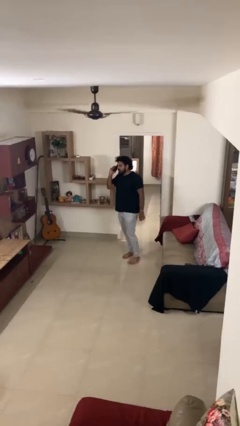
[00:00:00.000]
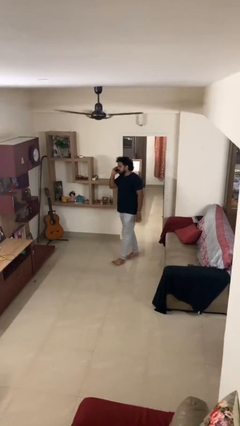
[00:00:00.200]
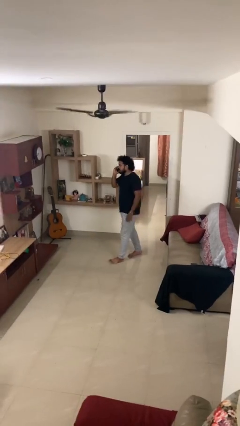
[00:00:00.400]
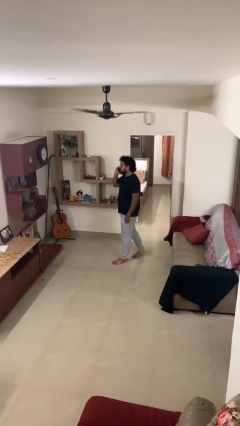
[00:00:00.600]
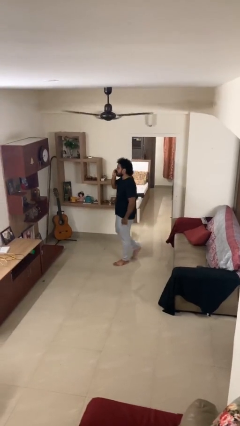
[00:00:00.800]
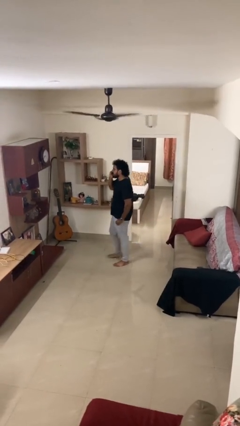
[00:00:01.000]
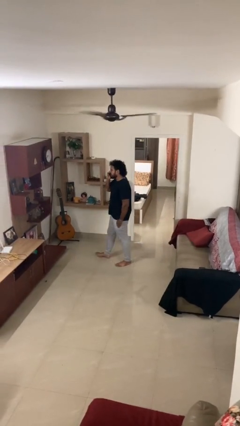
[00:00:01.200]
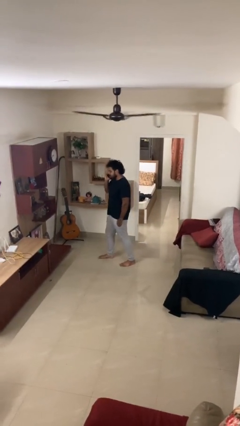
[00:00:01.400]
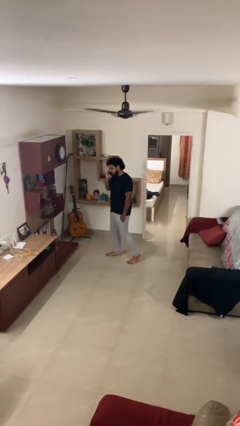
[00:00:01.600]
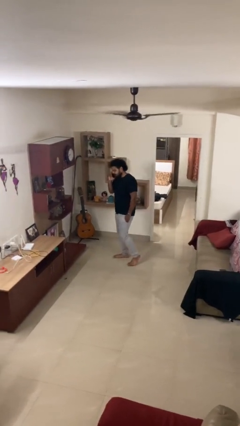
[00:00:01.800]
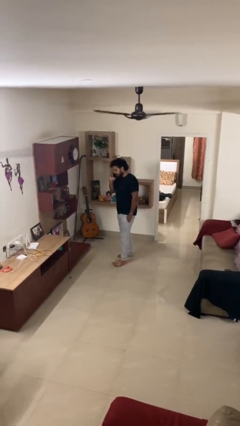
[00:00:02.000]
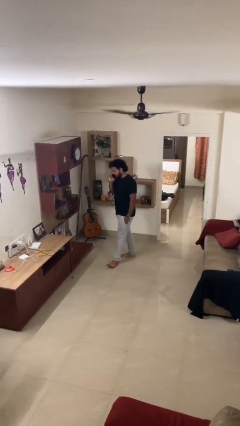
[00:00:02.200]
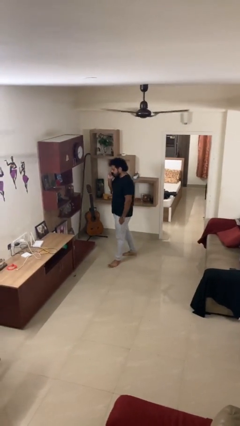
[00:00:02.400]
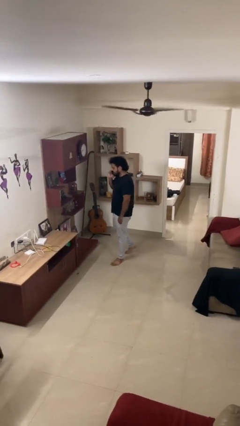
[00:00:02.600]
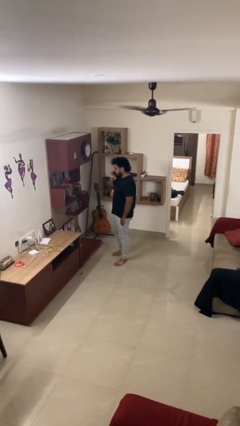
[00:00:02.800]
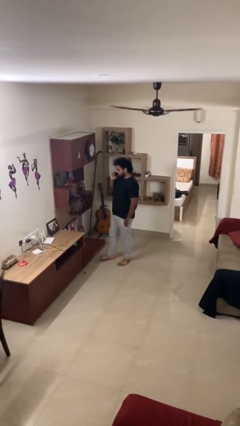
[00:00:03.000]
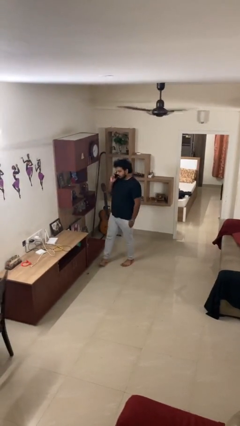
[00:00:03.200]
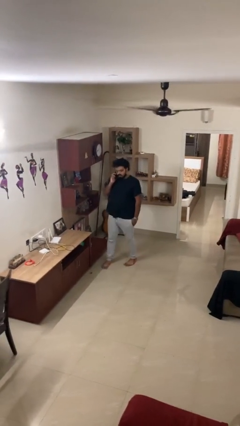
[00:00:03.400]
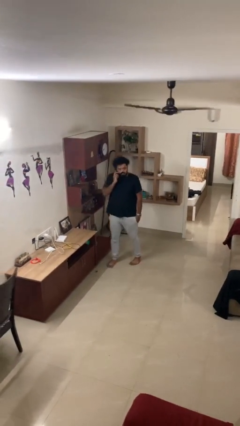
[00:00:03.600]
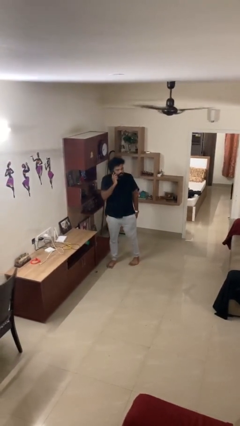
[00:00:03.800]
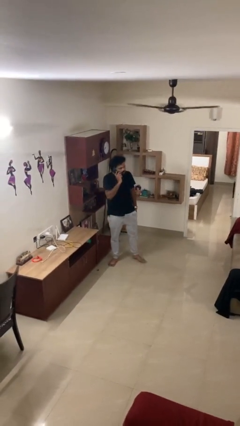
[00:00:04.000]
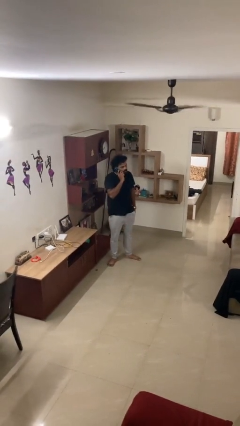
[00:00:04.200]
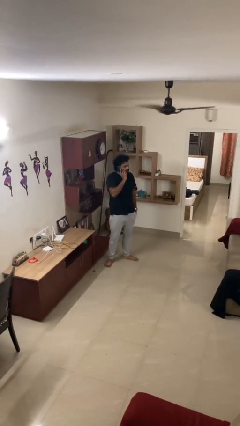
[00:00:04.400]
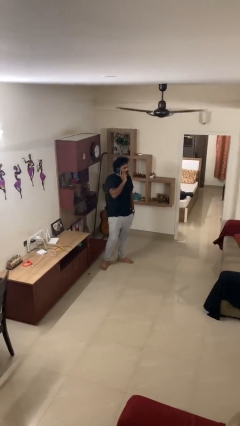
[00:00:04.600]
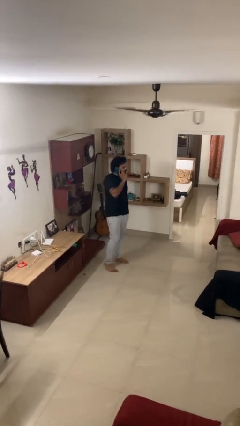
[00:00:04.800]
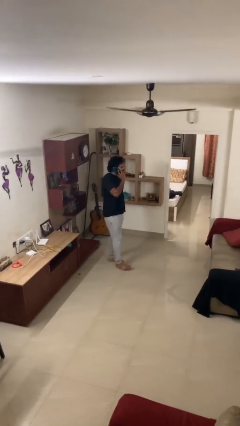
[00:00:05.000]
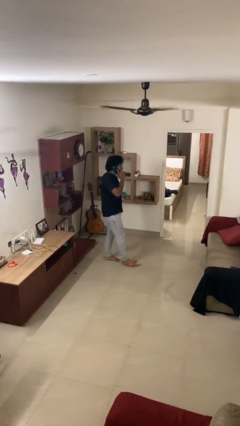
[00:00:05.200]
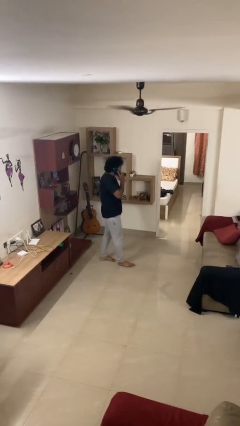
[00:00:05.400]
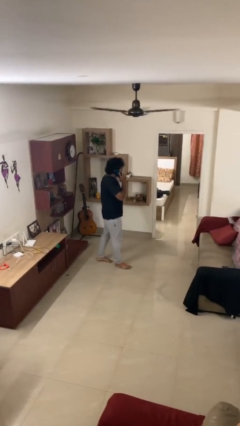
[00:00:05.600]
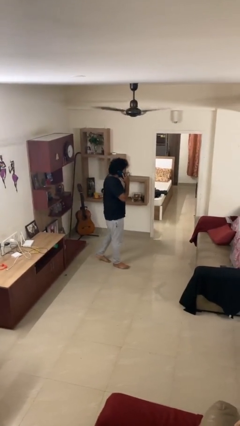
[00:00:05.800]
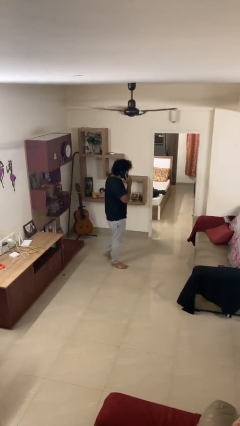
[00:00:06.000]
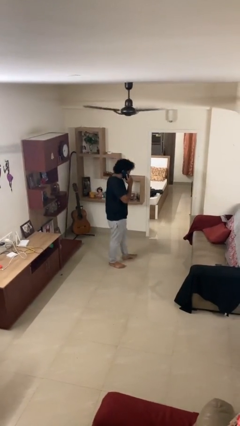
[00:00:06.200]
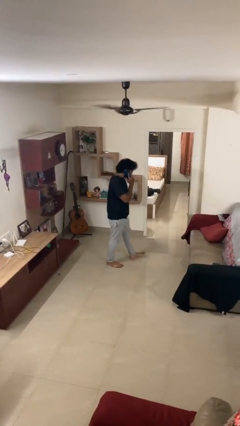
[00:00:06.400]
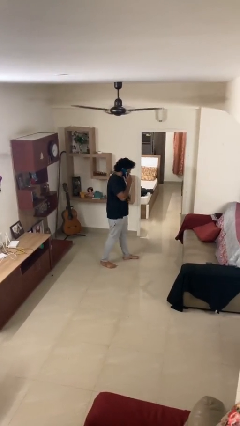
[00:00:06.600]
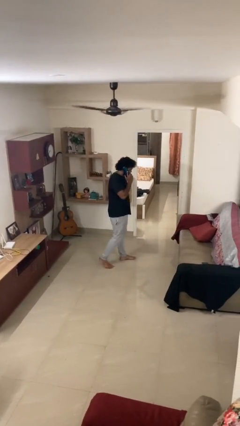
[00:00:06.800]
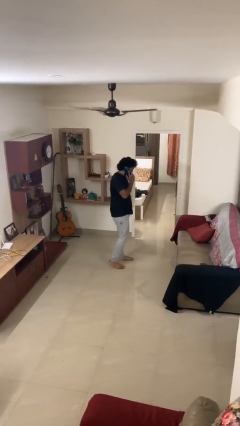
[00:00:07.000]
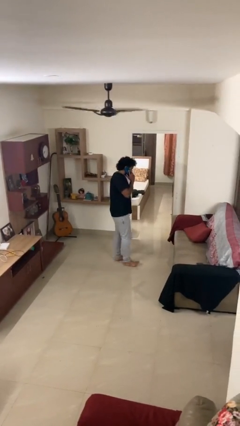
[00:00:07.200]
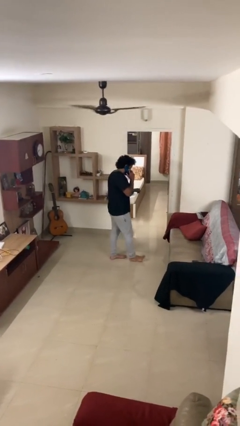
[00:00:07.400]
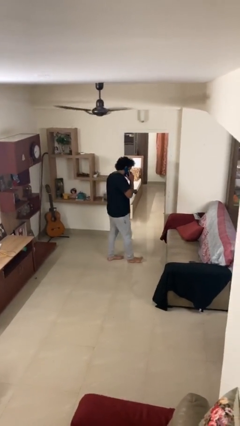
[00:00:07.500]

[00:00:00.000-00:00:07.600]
person talks on phone

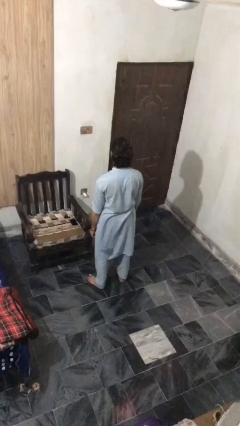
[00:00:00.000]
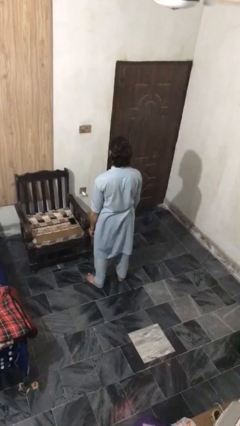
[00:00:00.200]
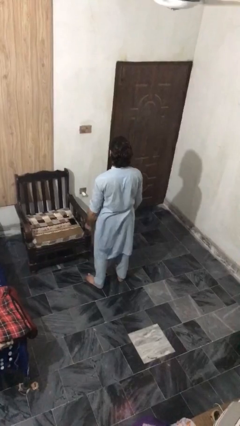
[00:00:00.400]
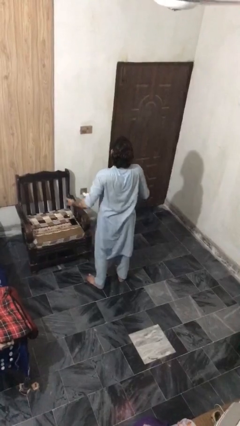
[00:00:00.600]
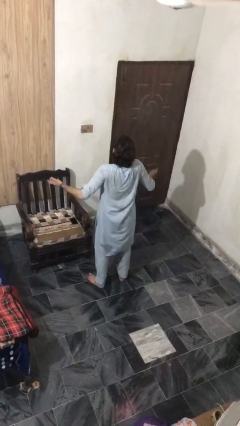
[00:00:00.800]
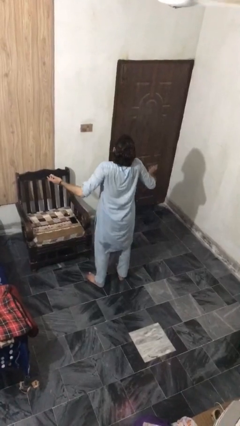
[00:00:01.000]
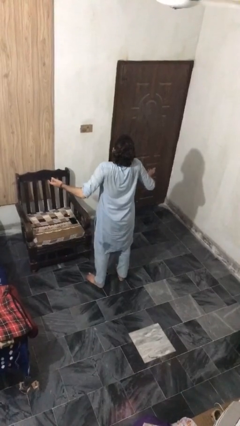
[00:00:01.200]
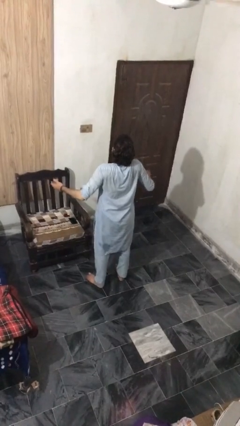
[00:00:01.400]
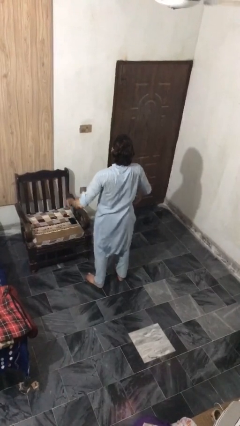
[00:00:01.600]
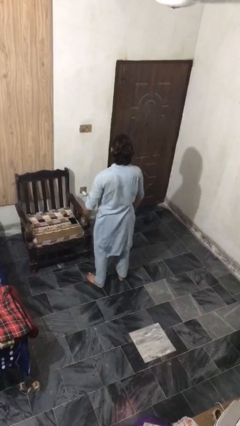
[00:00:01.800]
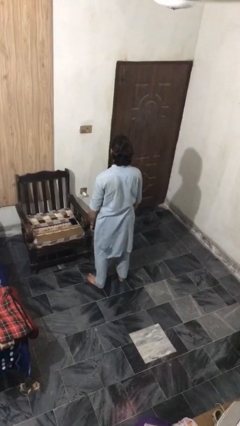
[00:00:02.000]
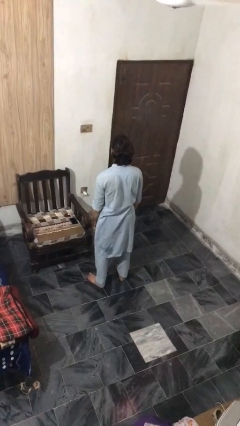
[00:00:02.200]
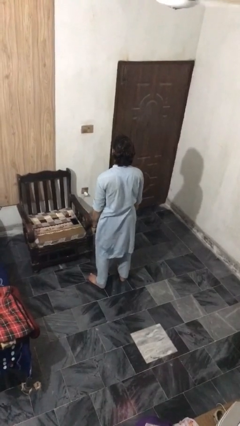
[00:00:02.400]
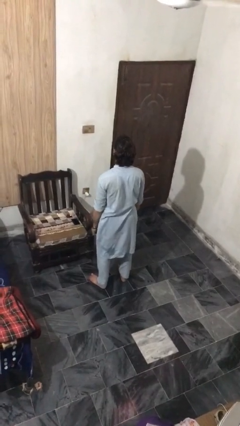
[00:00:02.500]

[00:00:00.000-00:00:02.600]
person shrugs

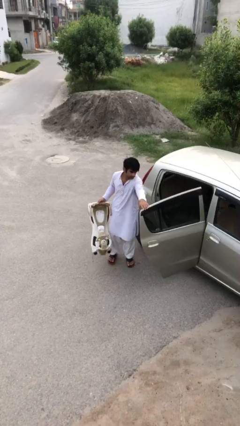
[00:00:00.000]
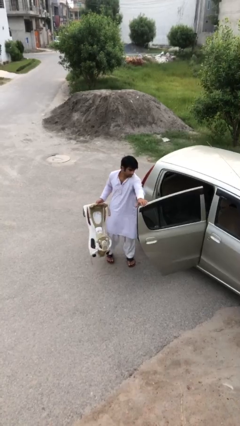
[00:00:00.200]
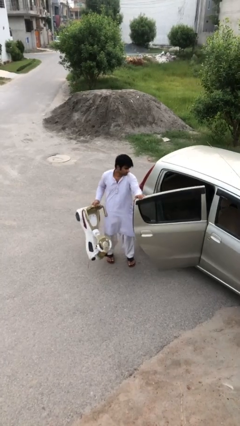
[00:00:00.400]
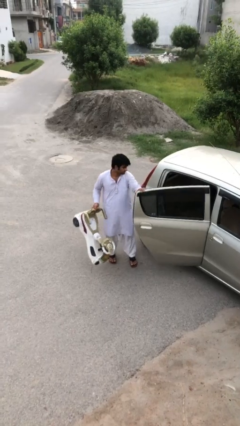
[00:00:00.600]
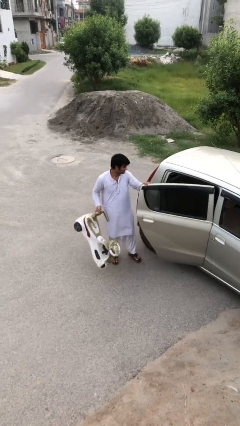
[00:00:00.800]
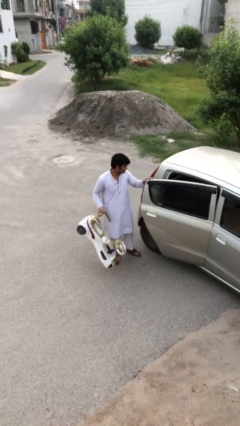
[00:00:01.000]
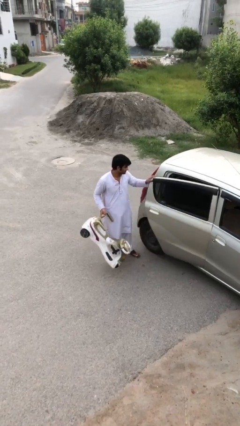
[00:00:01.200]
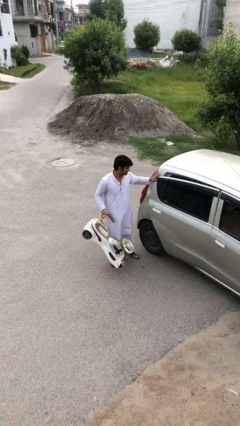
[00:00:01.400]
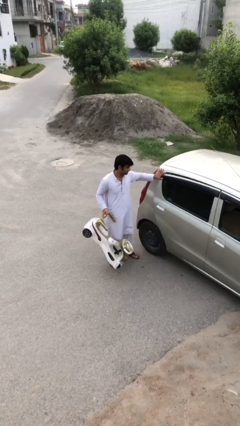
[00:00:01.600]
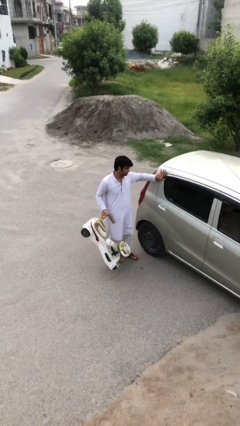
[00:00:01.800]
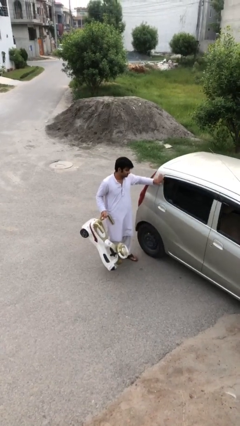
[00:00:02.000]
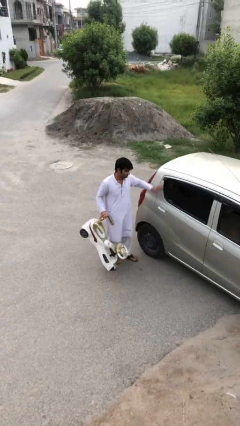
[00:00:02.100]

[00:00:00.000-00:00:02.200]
person closes car door

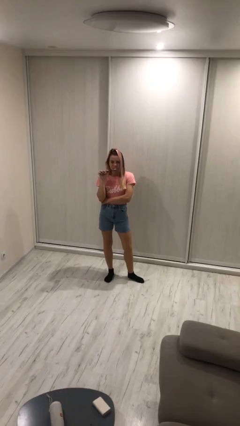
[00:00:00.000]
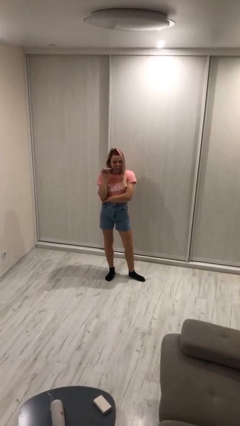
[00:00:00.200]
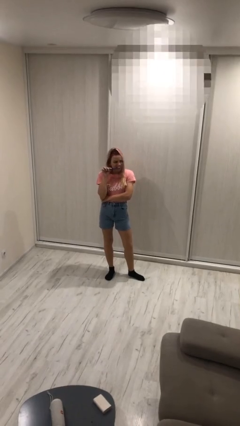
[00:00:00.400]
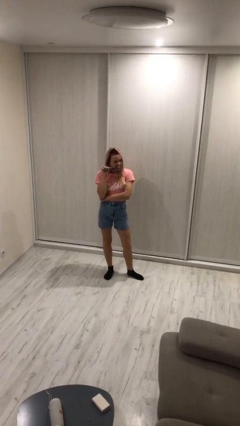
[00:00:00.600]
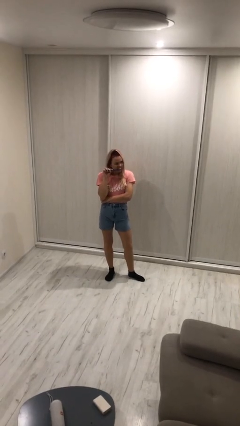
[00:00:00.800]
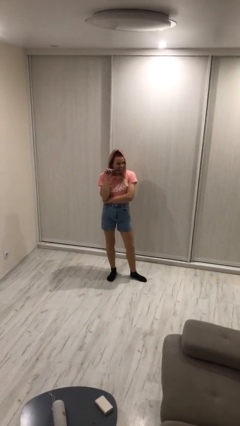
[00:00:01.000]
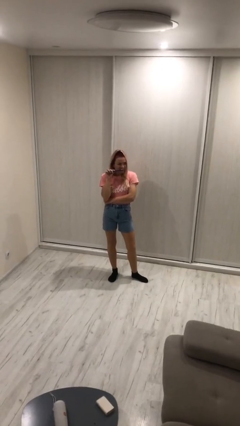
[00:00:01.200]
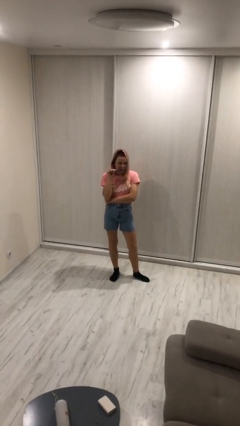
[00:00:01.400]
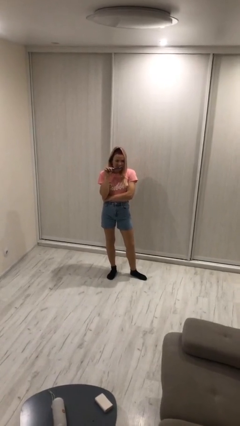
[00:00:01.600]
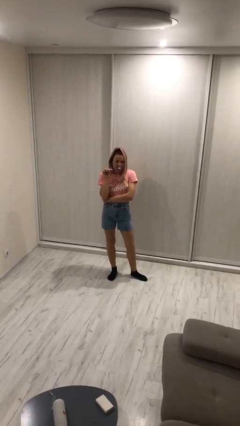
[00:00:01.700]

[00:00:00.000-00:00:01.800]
person brushes teeth

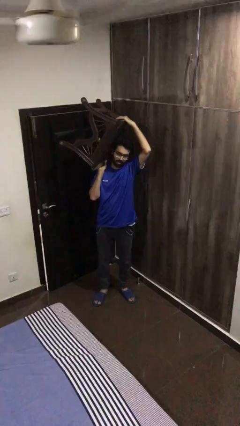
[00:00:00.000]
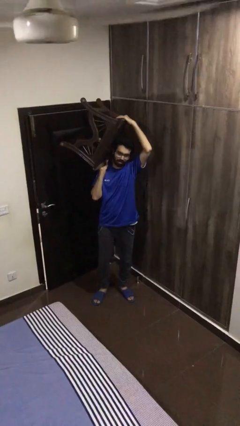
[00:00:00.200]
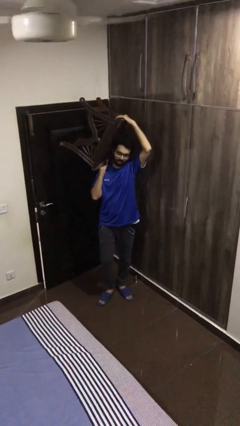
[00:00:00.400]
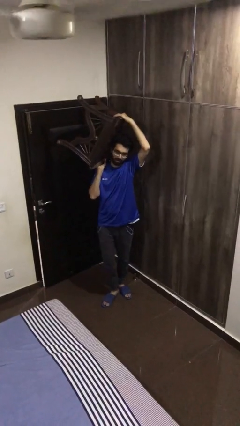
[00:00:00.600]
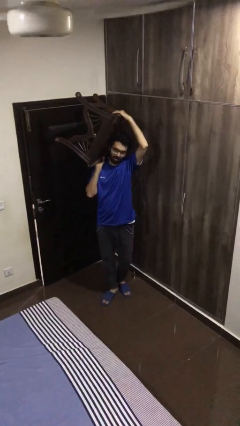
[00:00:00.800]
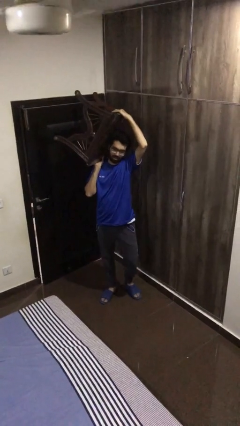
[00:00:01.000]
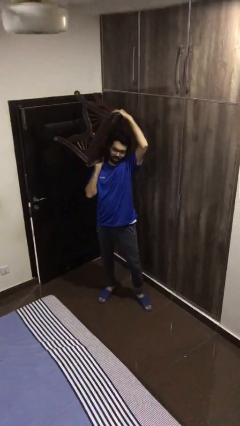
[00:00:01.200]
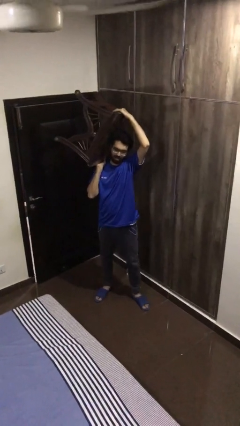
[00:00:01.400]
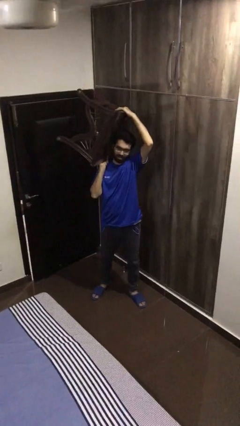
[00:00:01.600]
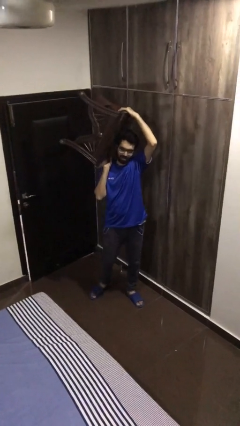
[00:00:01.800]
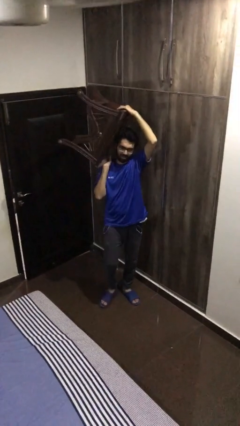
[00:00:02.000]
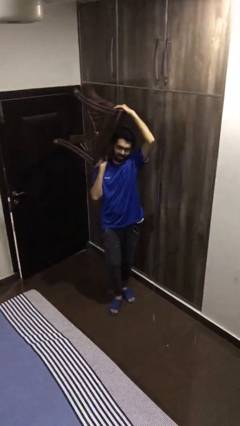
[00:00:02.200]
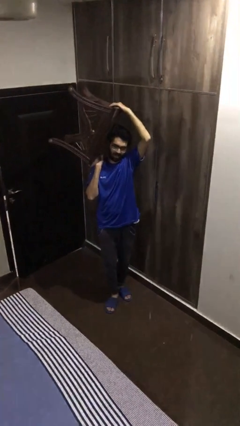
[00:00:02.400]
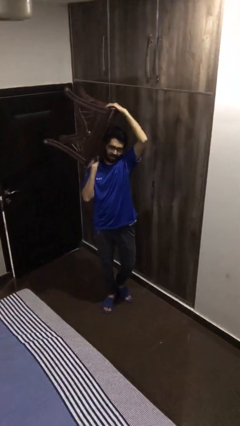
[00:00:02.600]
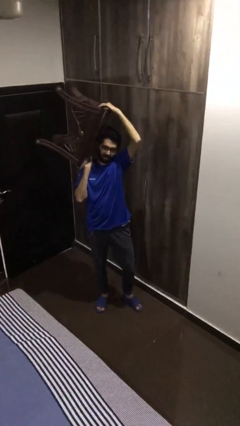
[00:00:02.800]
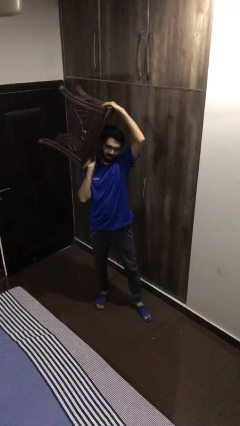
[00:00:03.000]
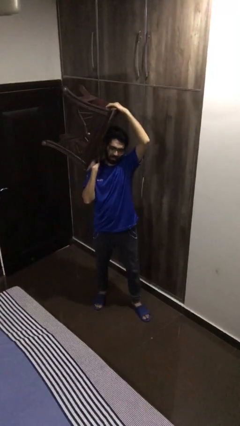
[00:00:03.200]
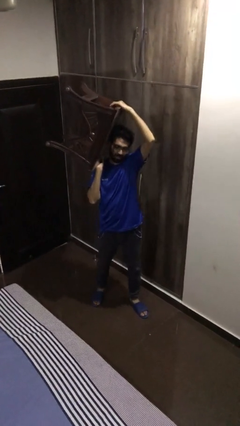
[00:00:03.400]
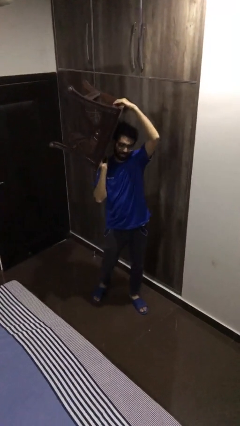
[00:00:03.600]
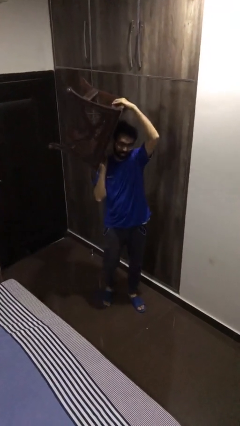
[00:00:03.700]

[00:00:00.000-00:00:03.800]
person carries heavy object
